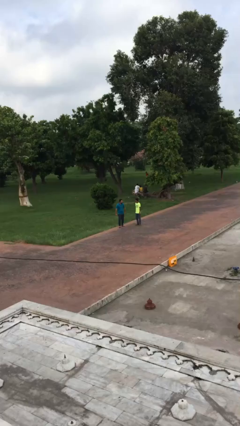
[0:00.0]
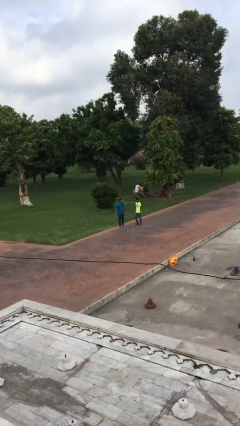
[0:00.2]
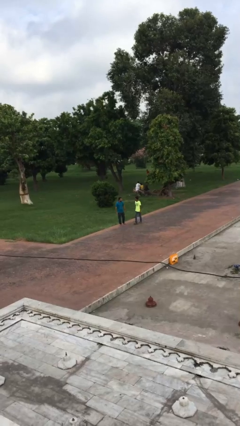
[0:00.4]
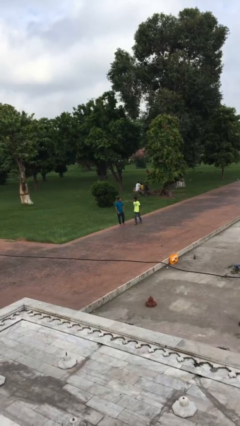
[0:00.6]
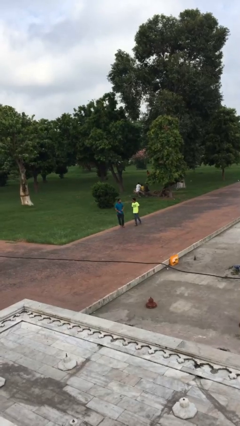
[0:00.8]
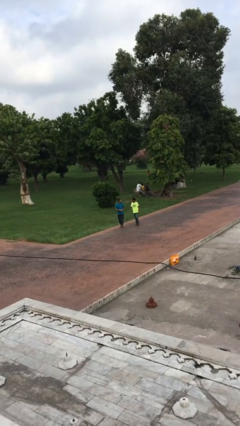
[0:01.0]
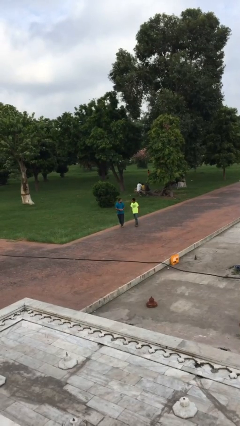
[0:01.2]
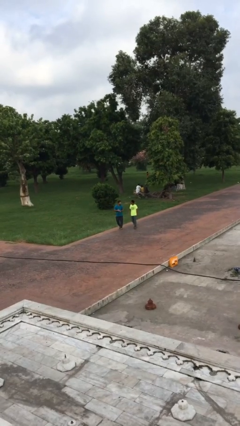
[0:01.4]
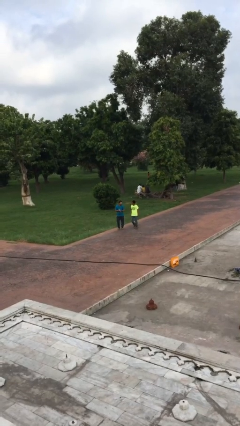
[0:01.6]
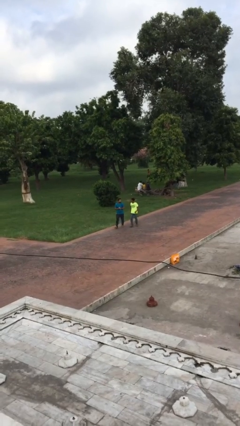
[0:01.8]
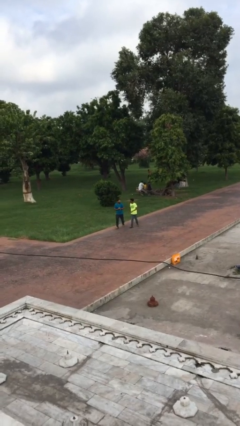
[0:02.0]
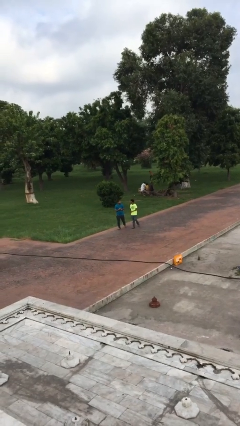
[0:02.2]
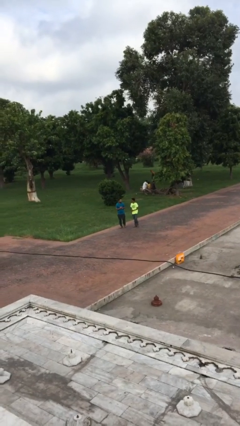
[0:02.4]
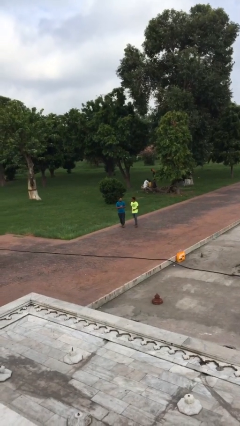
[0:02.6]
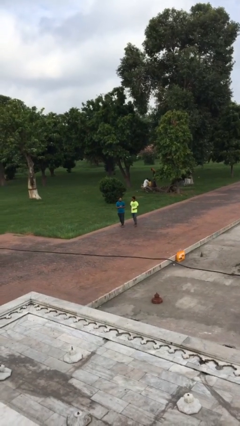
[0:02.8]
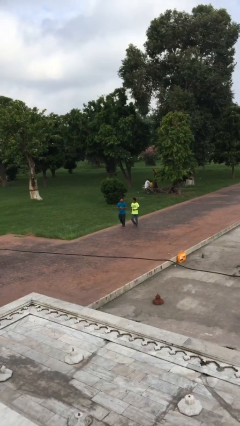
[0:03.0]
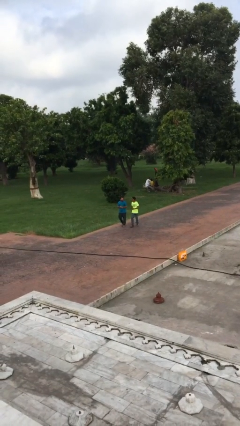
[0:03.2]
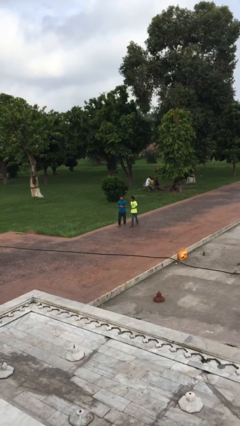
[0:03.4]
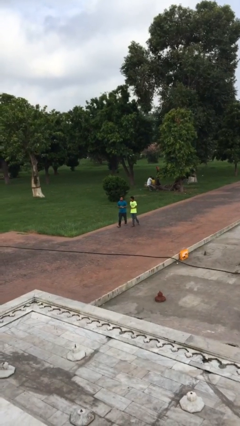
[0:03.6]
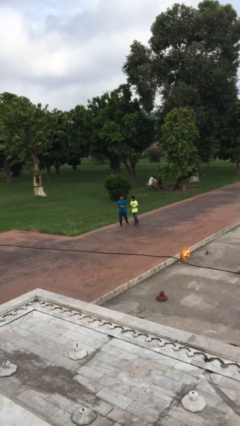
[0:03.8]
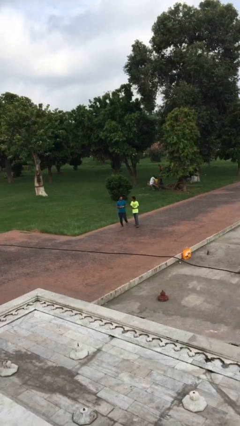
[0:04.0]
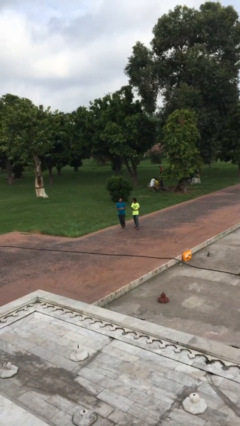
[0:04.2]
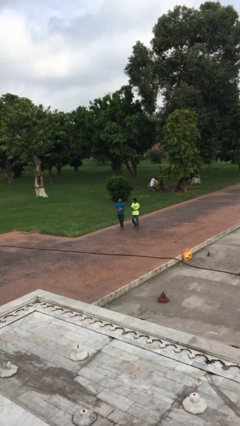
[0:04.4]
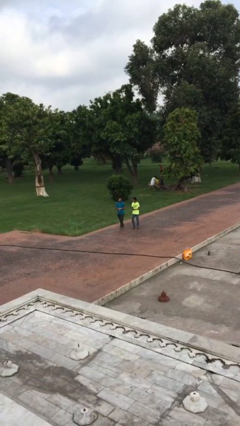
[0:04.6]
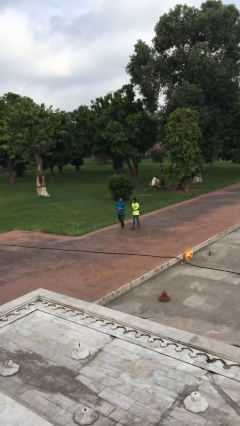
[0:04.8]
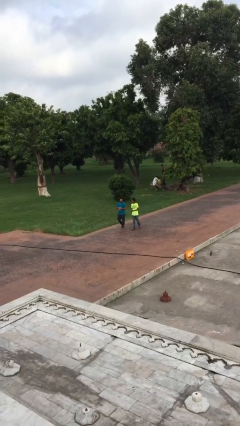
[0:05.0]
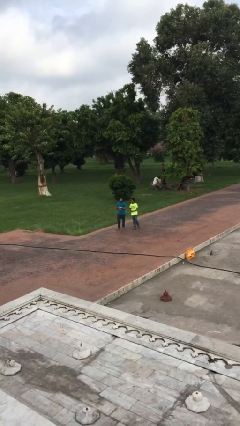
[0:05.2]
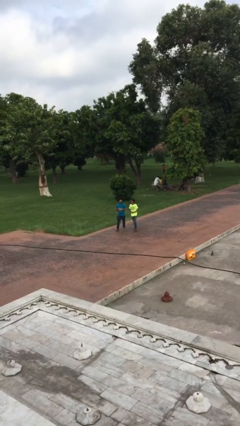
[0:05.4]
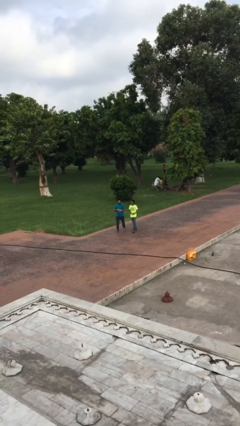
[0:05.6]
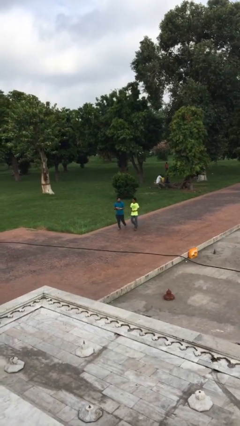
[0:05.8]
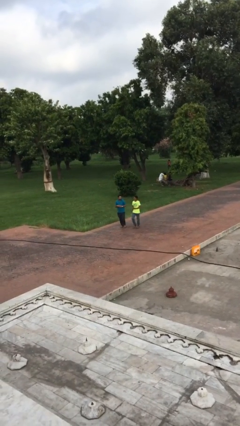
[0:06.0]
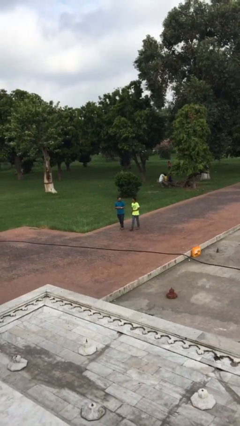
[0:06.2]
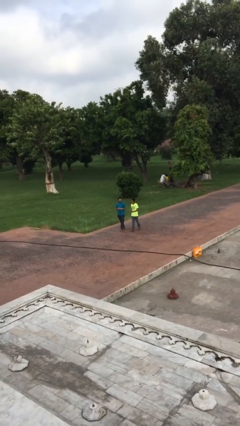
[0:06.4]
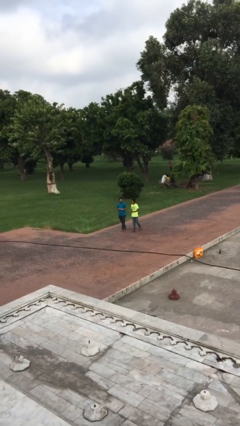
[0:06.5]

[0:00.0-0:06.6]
person talks to person

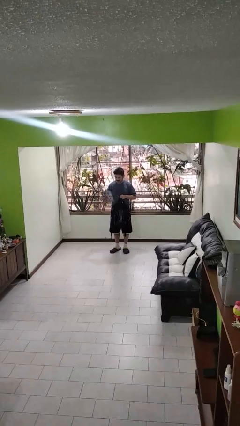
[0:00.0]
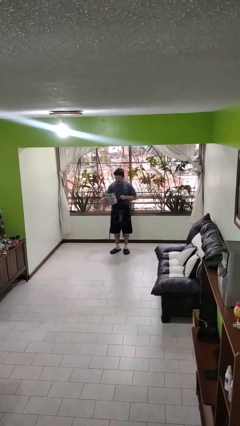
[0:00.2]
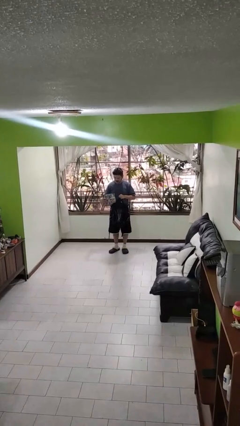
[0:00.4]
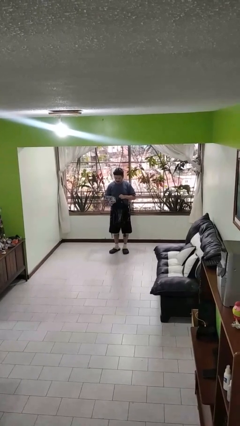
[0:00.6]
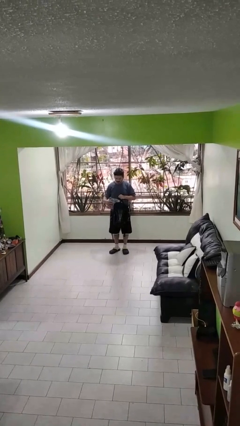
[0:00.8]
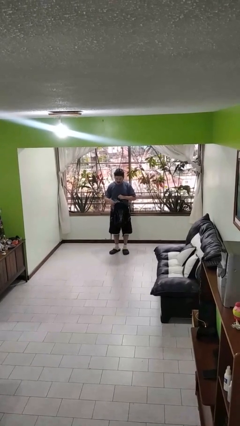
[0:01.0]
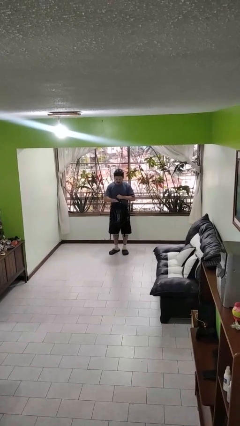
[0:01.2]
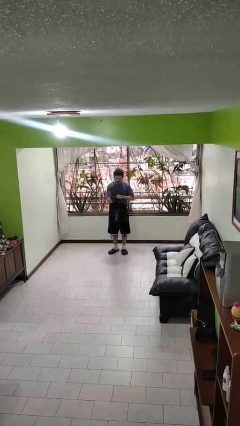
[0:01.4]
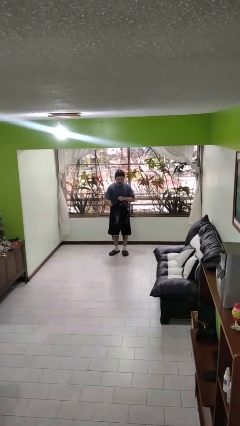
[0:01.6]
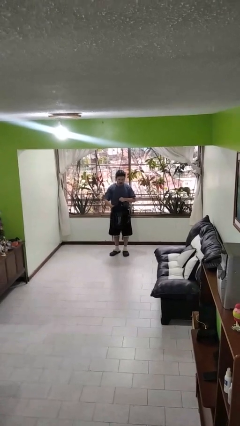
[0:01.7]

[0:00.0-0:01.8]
person puts object into backpack

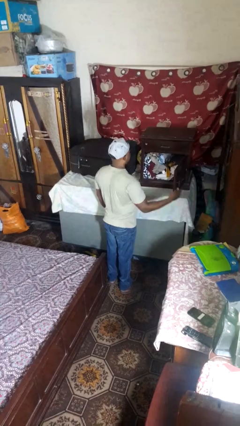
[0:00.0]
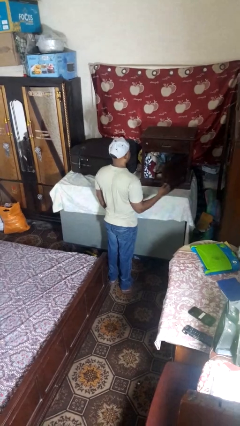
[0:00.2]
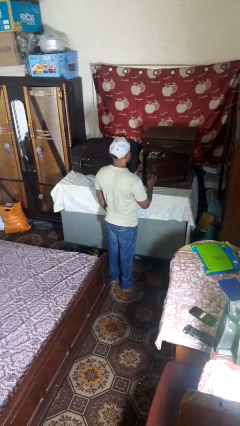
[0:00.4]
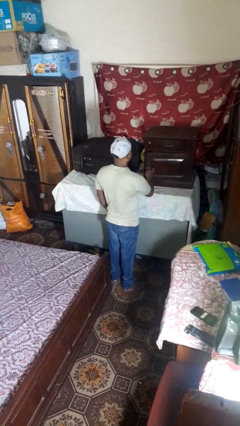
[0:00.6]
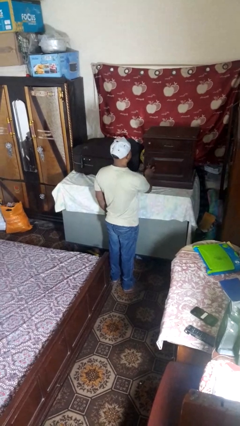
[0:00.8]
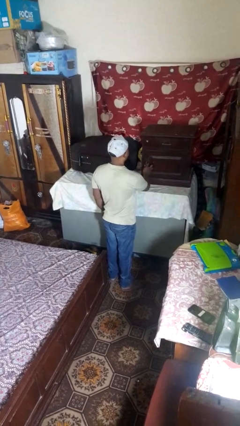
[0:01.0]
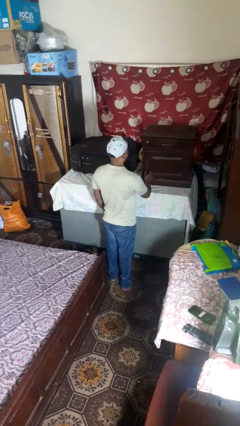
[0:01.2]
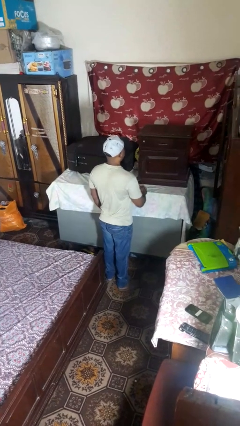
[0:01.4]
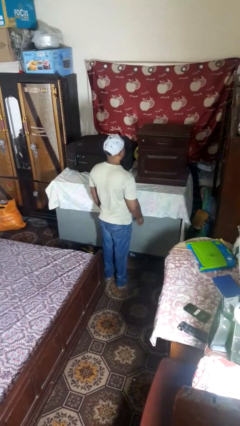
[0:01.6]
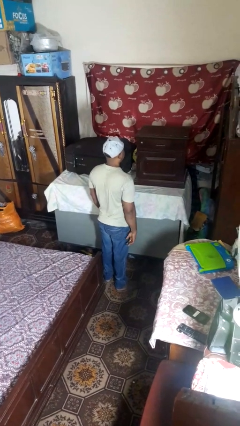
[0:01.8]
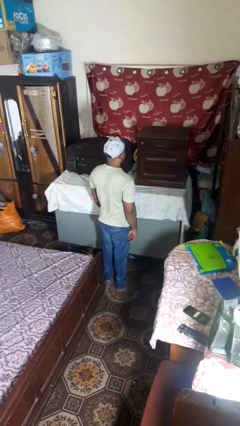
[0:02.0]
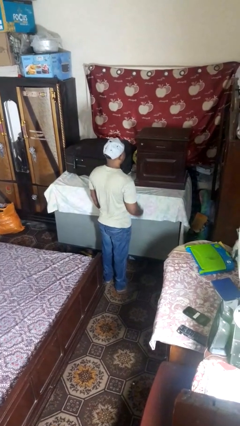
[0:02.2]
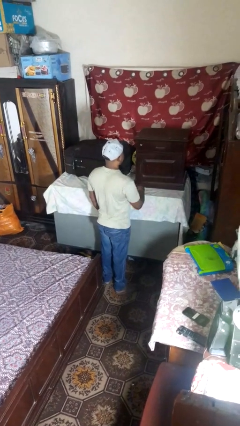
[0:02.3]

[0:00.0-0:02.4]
person closes closet door

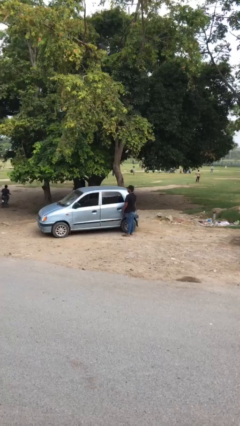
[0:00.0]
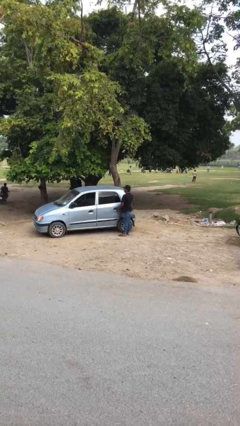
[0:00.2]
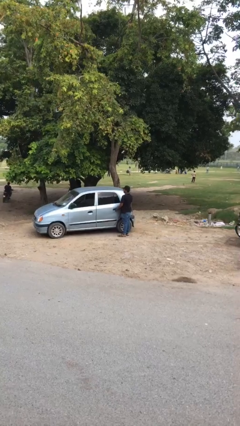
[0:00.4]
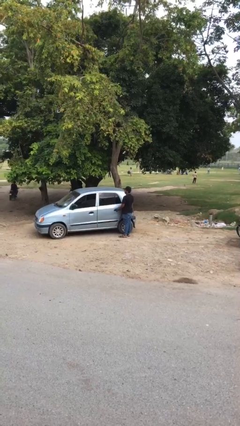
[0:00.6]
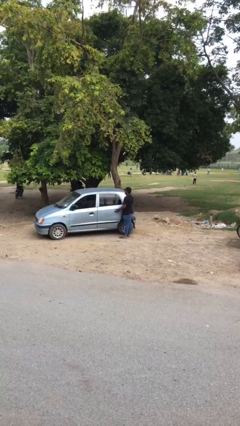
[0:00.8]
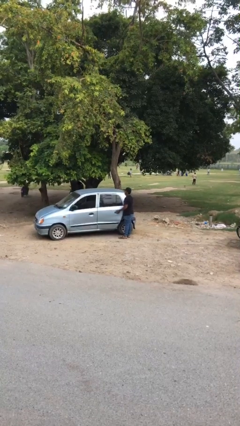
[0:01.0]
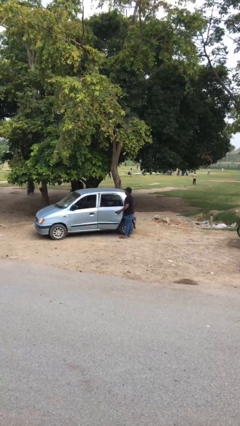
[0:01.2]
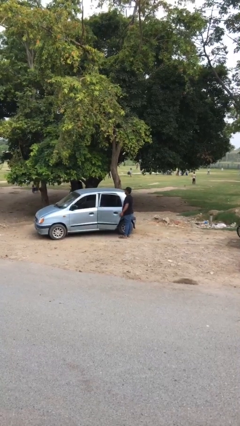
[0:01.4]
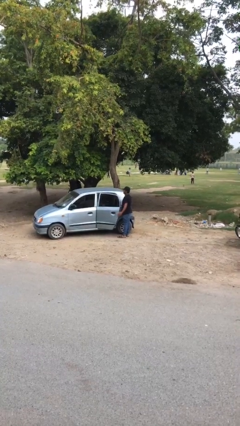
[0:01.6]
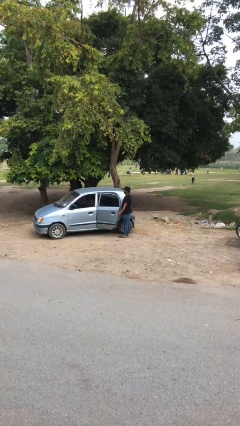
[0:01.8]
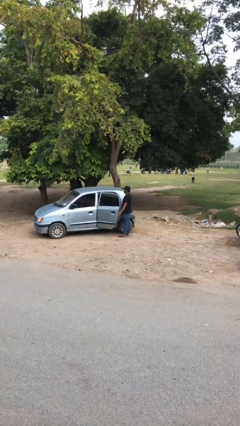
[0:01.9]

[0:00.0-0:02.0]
person opens car door

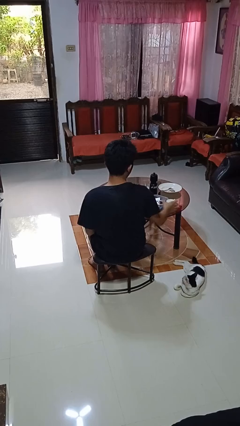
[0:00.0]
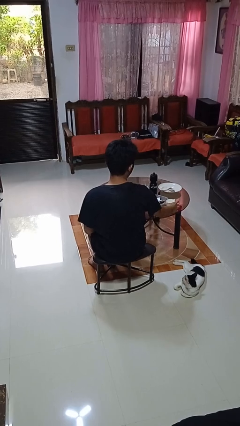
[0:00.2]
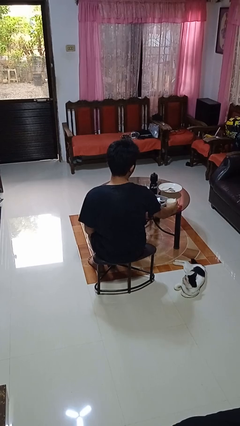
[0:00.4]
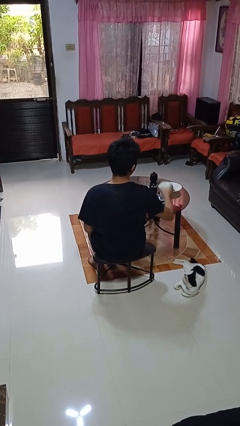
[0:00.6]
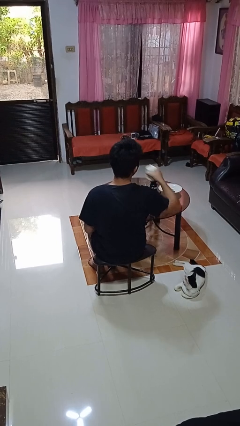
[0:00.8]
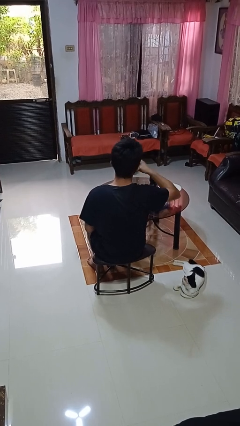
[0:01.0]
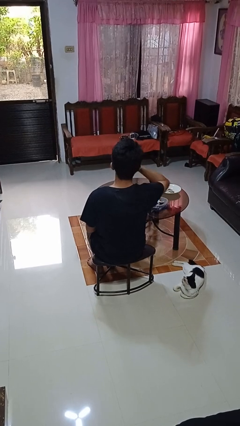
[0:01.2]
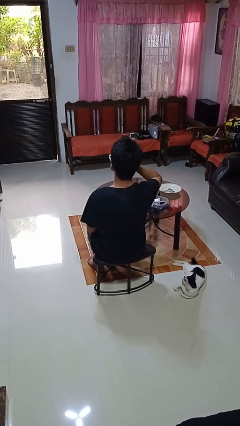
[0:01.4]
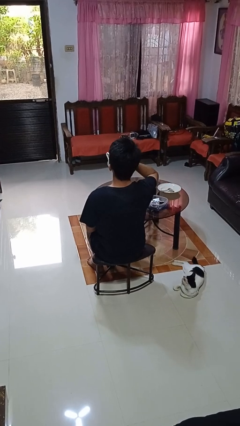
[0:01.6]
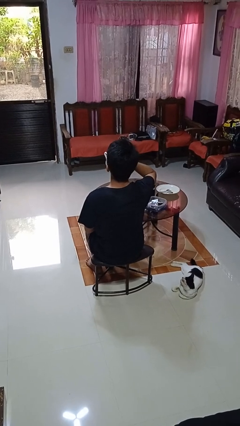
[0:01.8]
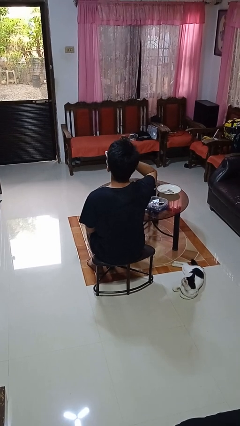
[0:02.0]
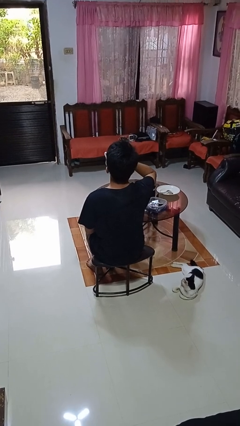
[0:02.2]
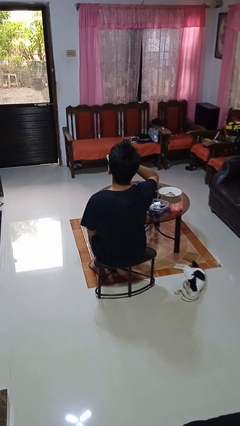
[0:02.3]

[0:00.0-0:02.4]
person drinks from cup

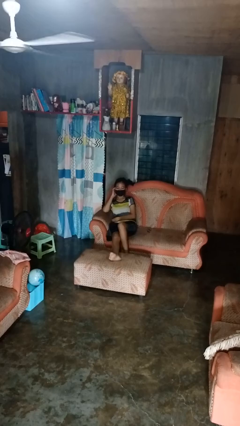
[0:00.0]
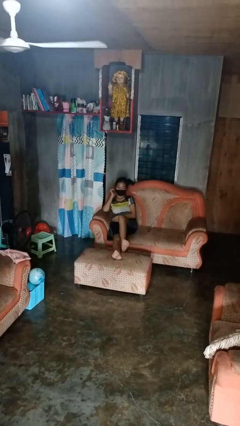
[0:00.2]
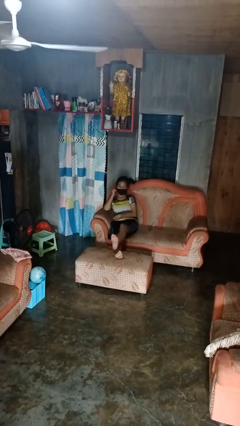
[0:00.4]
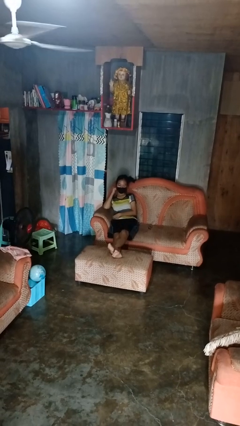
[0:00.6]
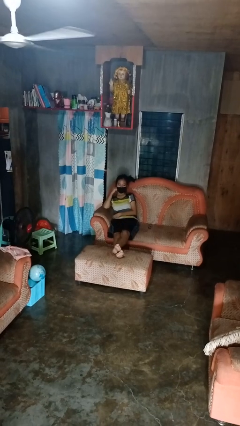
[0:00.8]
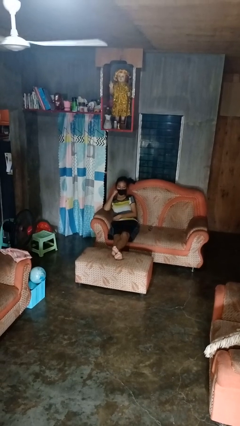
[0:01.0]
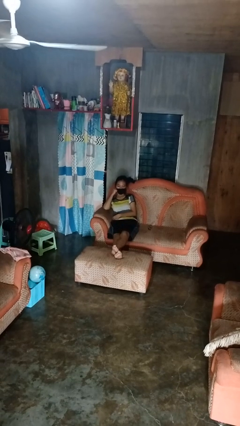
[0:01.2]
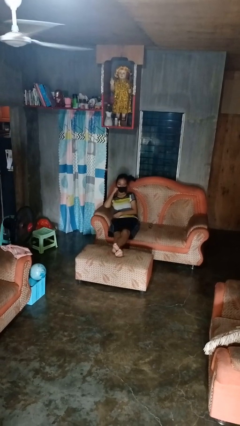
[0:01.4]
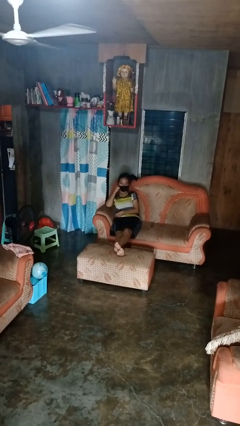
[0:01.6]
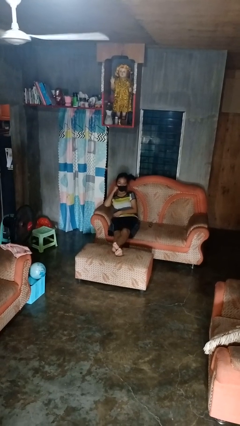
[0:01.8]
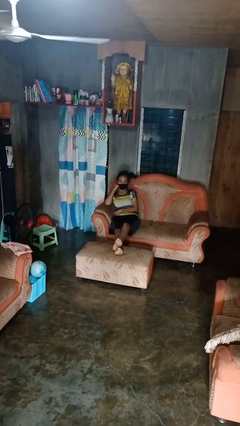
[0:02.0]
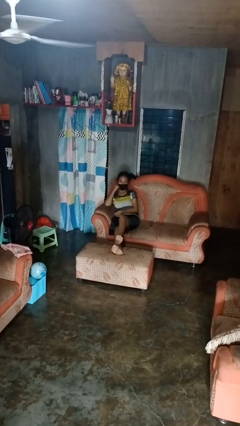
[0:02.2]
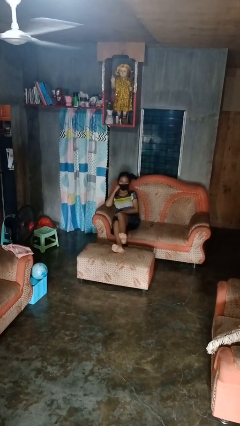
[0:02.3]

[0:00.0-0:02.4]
person puts feet up

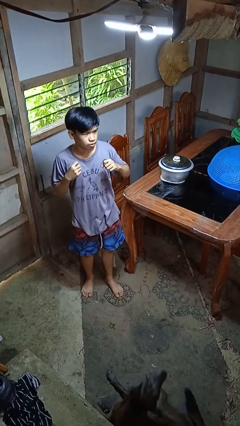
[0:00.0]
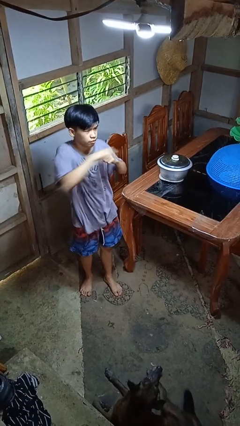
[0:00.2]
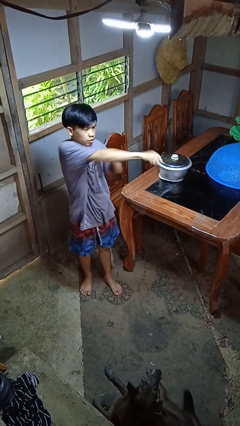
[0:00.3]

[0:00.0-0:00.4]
person punches
